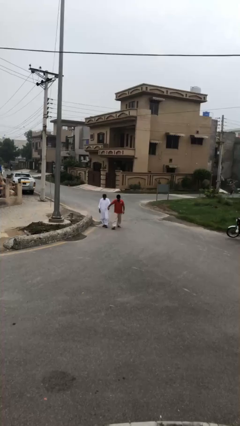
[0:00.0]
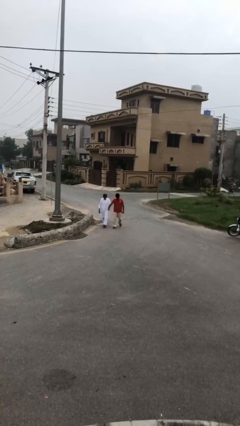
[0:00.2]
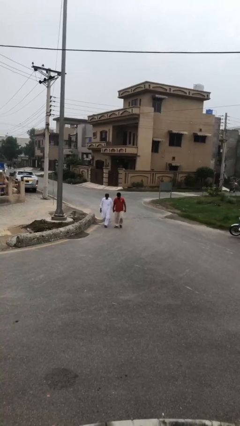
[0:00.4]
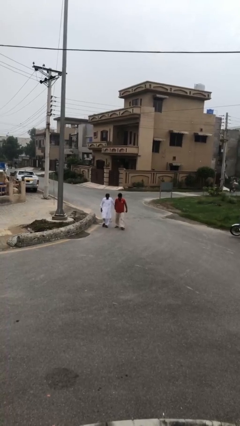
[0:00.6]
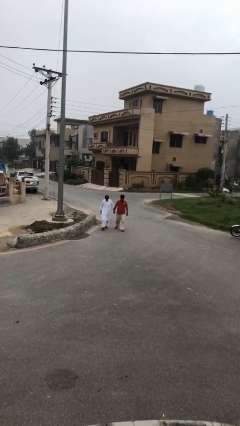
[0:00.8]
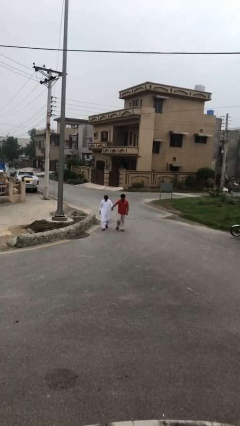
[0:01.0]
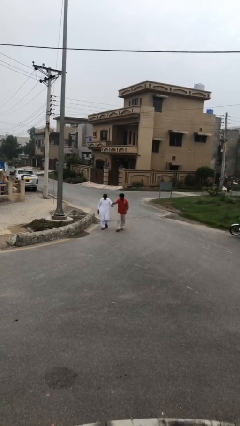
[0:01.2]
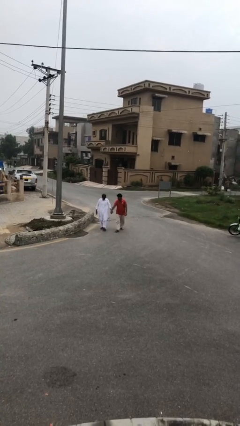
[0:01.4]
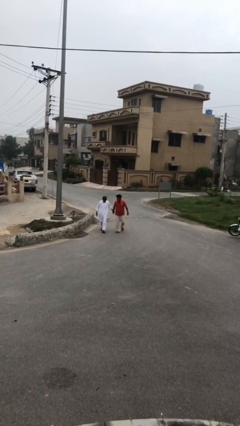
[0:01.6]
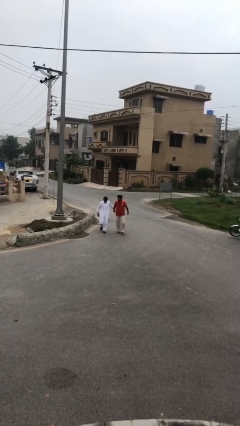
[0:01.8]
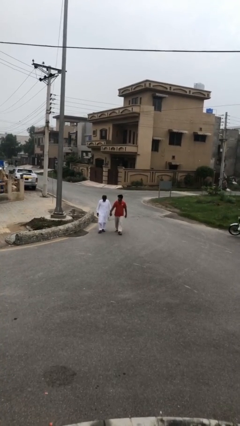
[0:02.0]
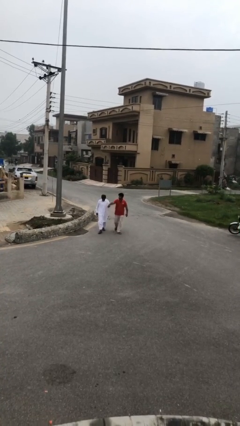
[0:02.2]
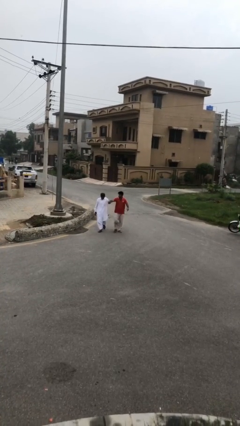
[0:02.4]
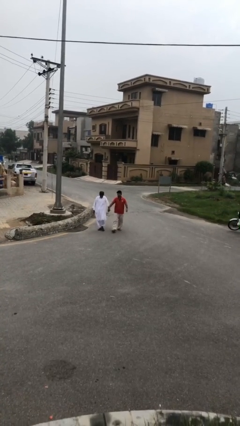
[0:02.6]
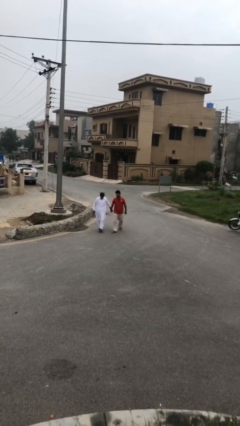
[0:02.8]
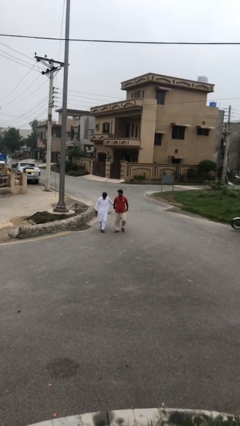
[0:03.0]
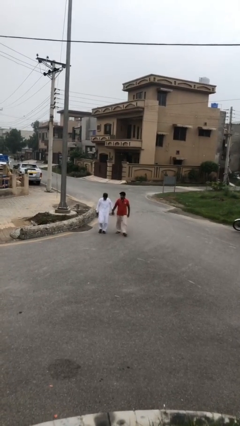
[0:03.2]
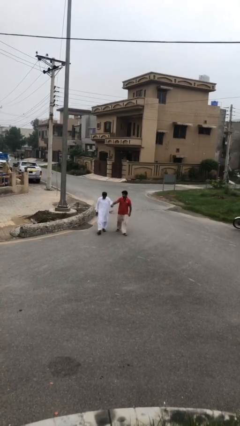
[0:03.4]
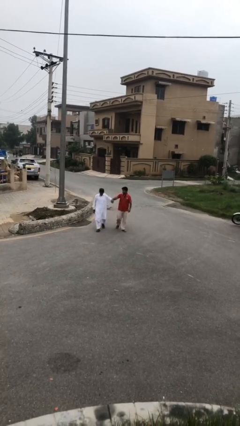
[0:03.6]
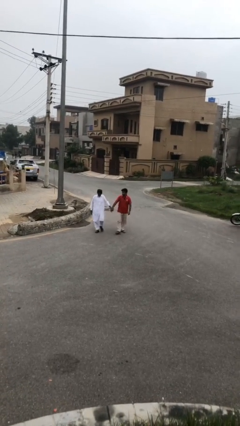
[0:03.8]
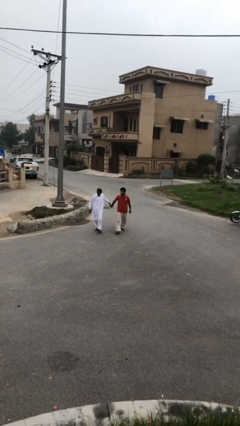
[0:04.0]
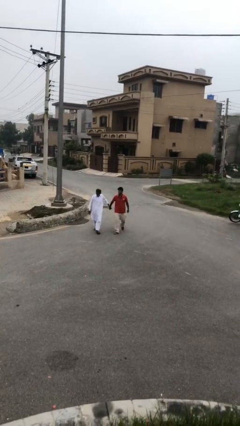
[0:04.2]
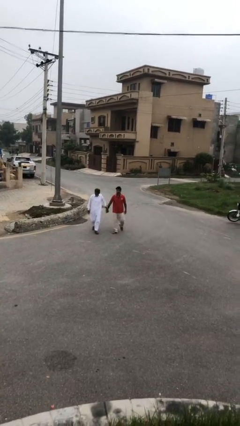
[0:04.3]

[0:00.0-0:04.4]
person holds hand

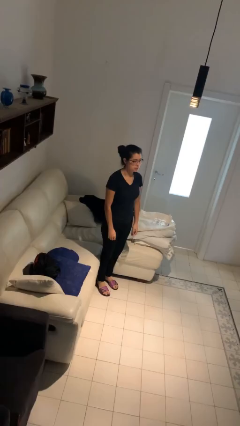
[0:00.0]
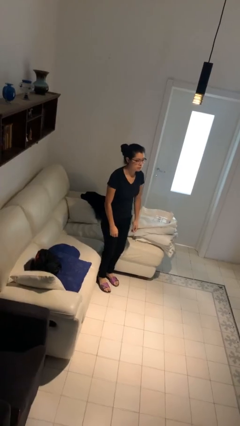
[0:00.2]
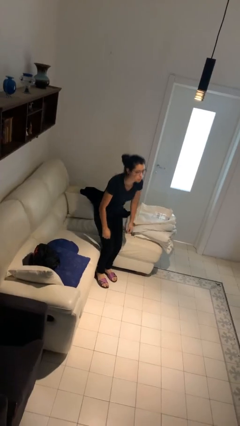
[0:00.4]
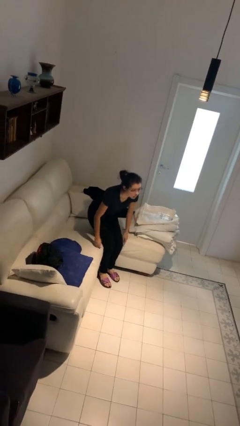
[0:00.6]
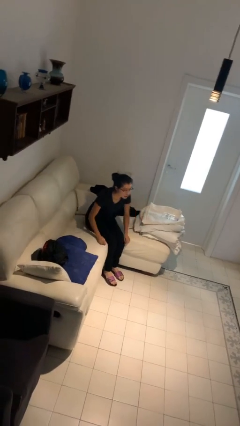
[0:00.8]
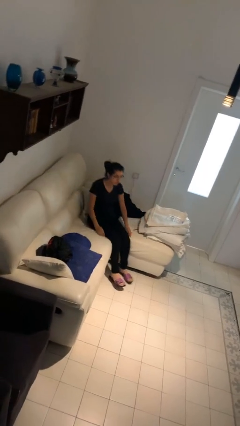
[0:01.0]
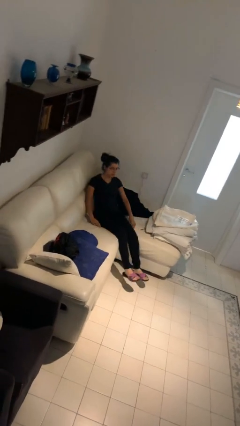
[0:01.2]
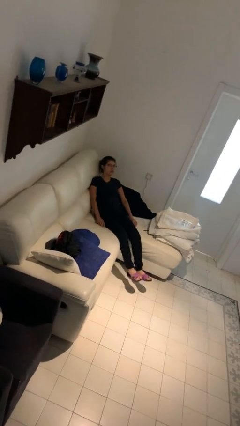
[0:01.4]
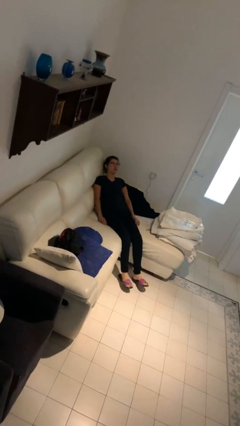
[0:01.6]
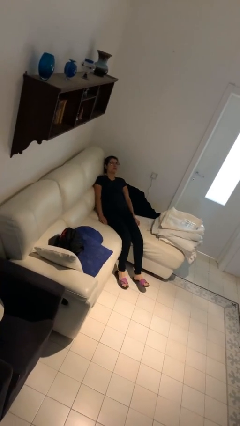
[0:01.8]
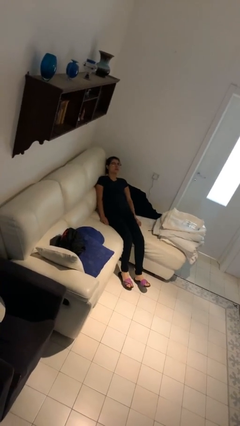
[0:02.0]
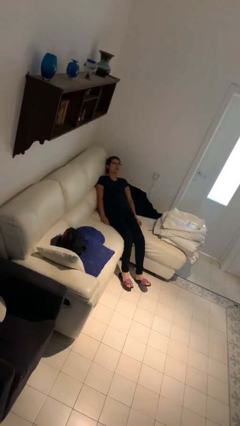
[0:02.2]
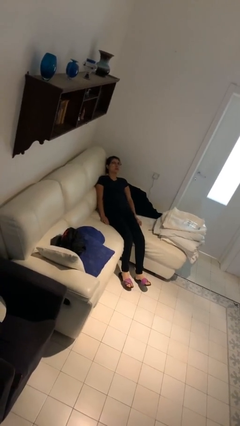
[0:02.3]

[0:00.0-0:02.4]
person lies down on couch

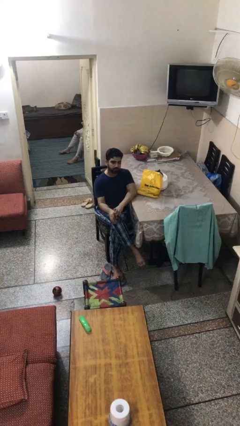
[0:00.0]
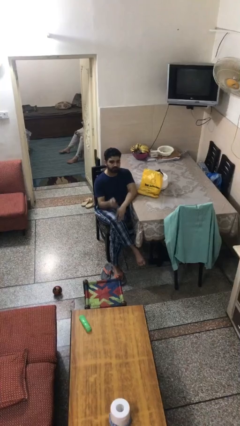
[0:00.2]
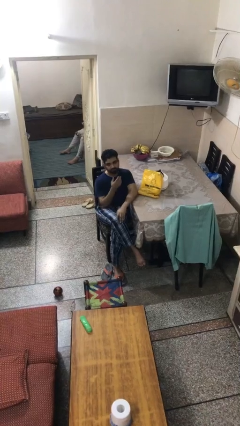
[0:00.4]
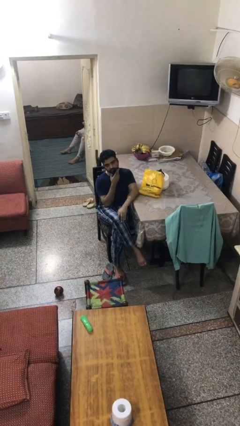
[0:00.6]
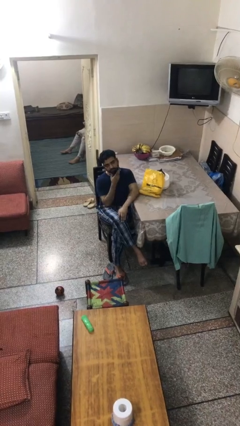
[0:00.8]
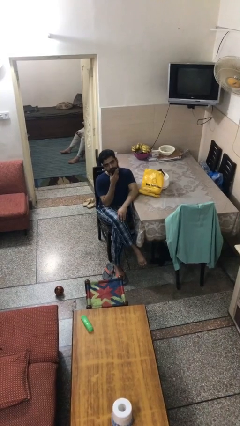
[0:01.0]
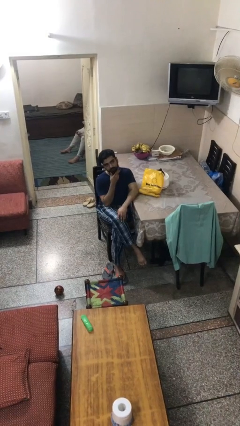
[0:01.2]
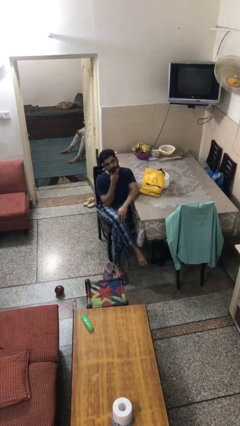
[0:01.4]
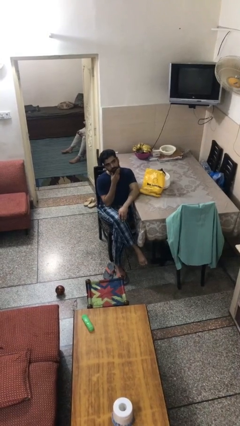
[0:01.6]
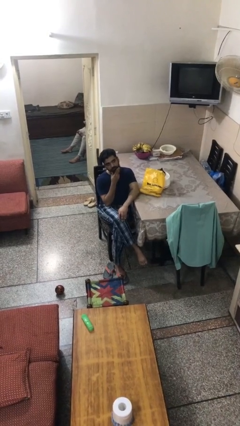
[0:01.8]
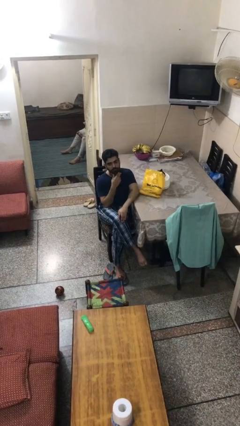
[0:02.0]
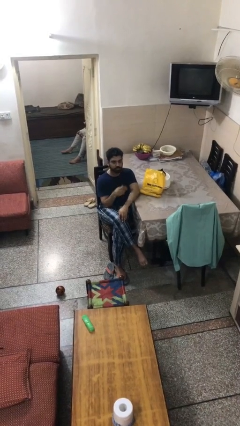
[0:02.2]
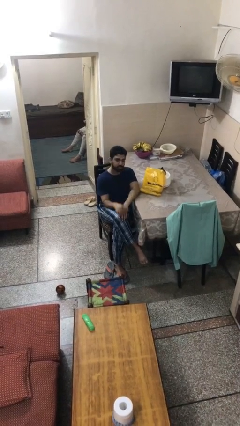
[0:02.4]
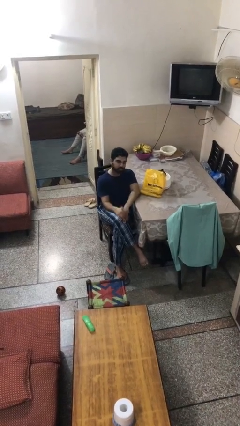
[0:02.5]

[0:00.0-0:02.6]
person strokes chin

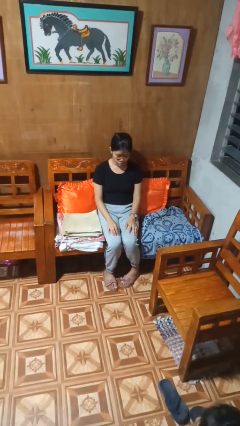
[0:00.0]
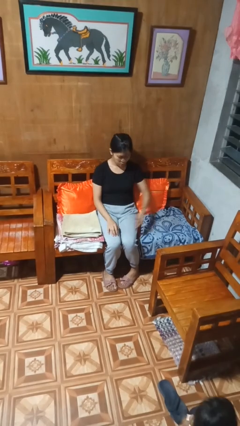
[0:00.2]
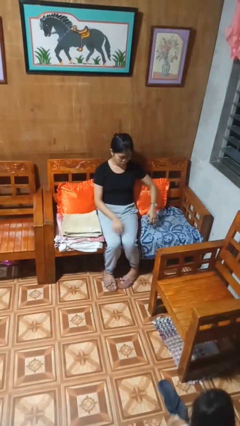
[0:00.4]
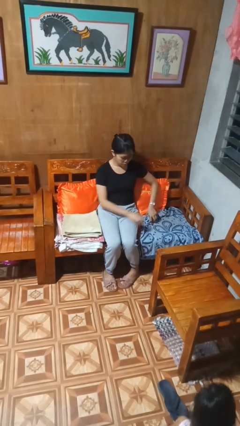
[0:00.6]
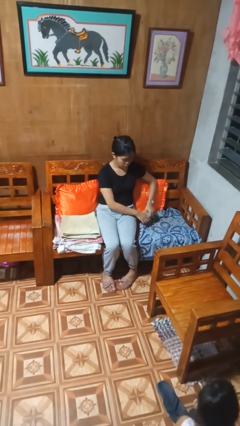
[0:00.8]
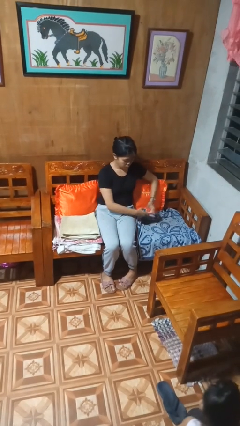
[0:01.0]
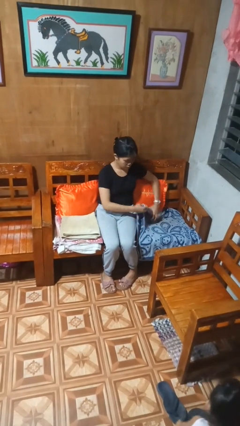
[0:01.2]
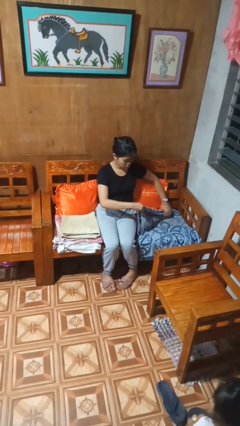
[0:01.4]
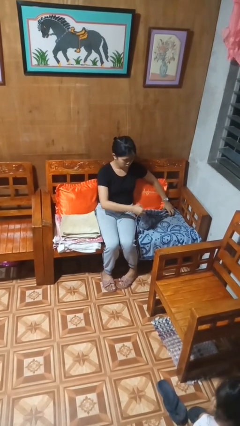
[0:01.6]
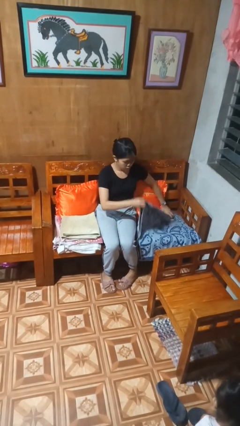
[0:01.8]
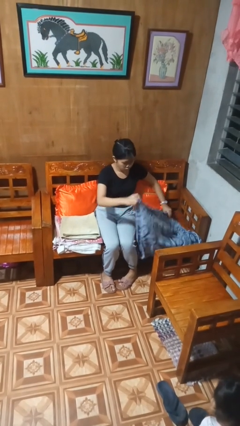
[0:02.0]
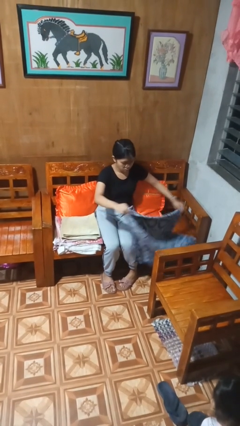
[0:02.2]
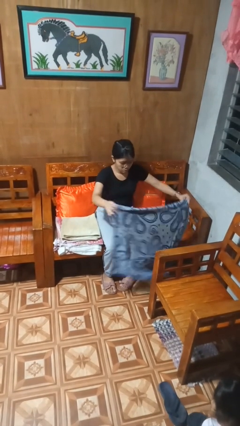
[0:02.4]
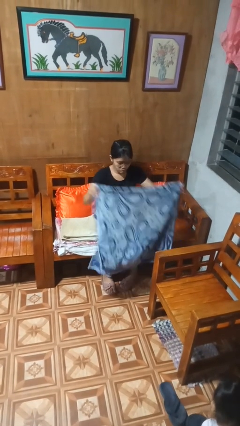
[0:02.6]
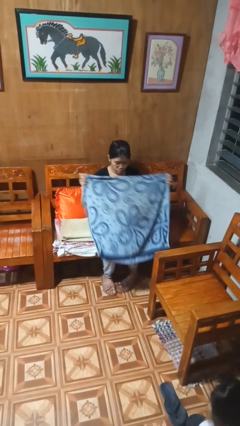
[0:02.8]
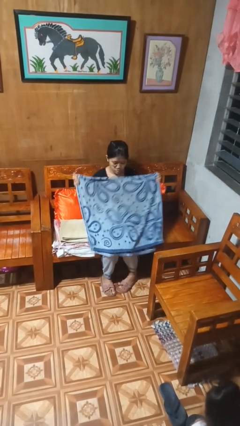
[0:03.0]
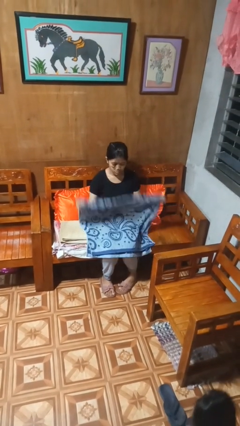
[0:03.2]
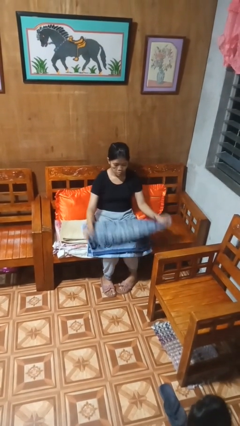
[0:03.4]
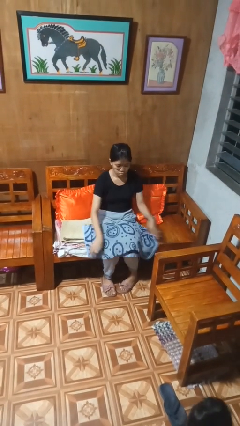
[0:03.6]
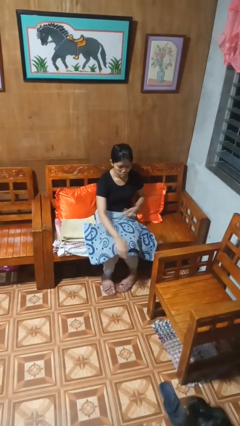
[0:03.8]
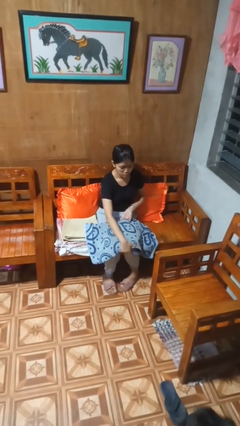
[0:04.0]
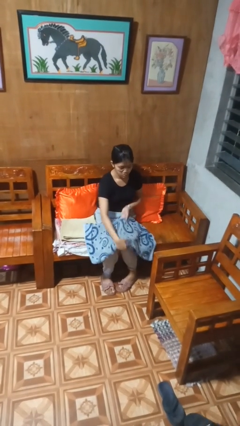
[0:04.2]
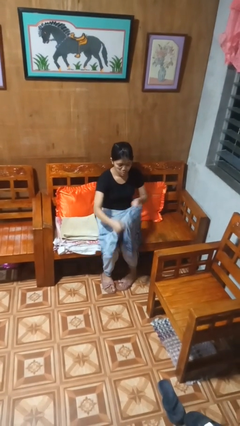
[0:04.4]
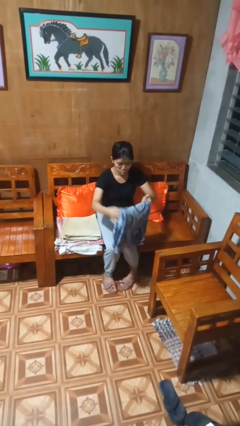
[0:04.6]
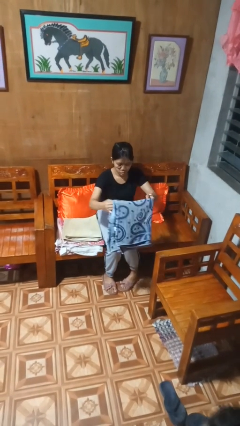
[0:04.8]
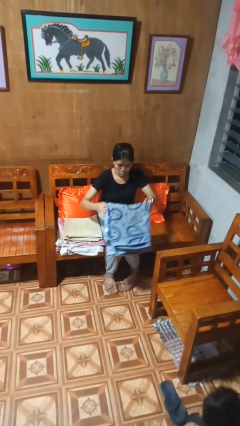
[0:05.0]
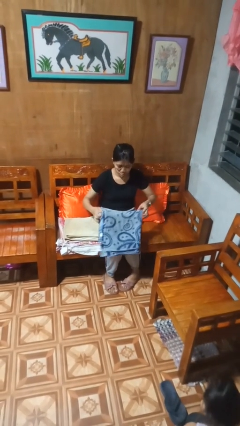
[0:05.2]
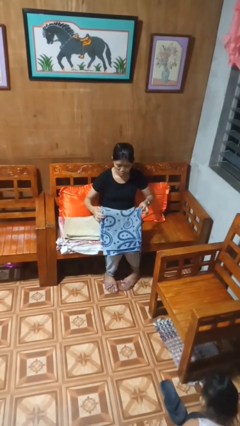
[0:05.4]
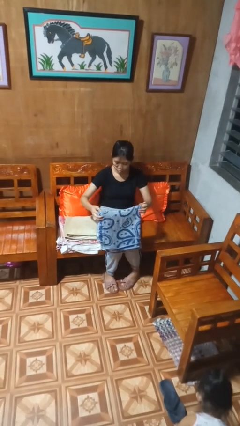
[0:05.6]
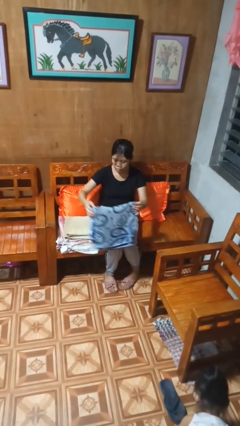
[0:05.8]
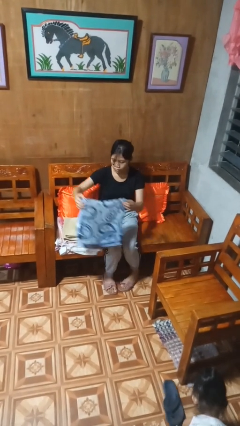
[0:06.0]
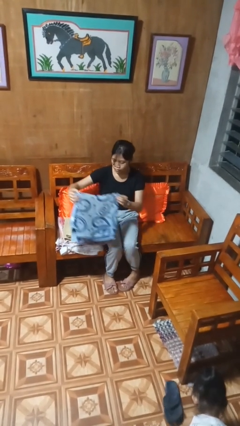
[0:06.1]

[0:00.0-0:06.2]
person folds towel

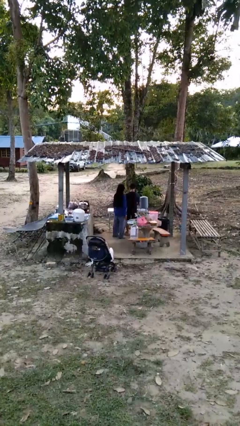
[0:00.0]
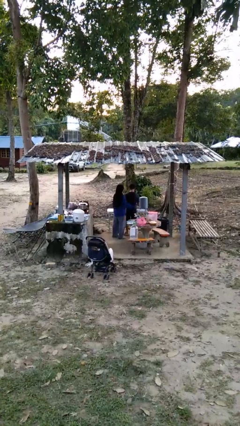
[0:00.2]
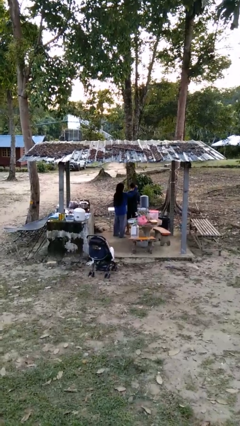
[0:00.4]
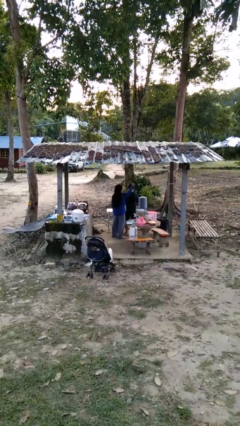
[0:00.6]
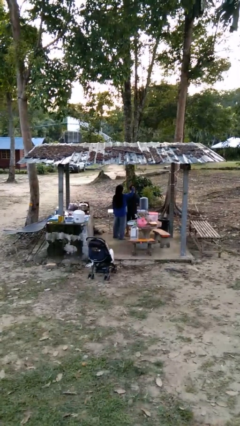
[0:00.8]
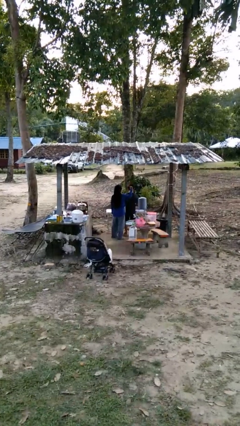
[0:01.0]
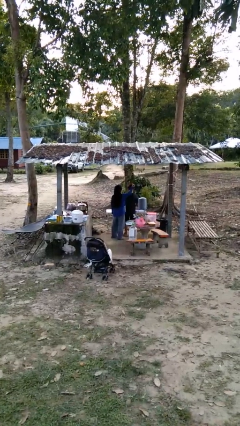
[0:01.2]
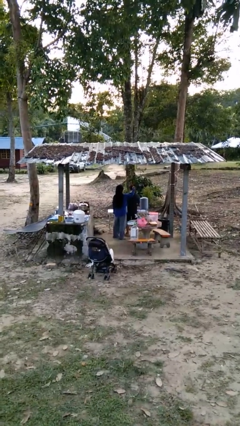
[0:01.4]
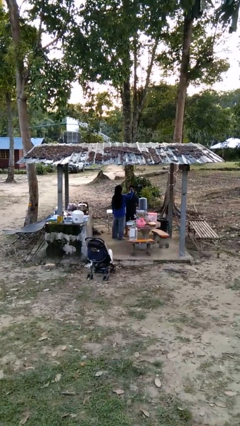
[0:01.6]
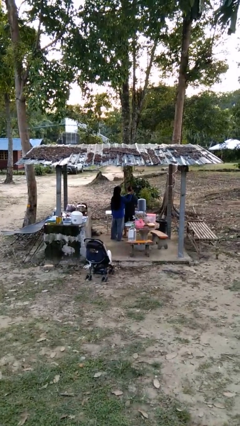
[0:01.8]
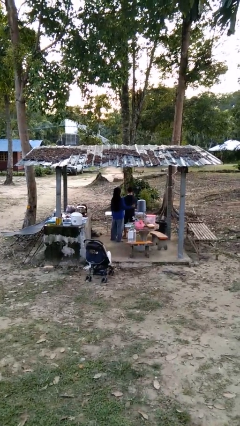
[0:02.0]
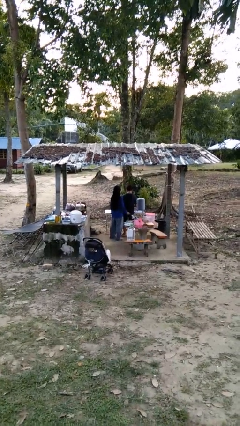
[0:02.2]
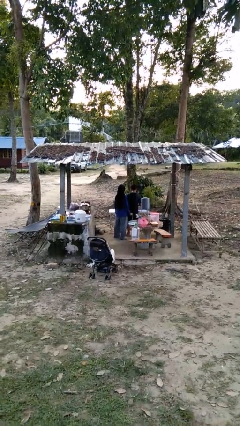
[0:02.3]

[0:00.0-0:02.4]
person brushes hair of person

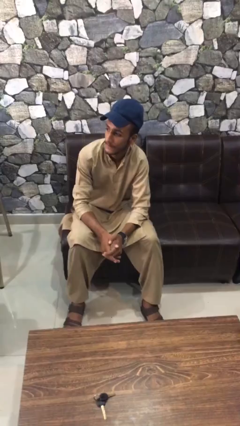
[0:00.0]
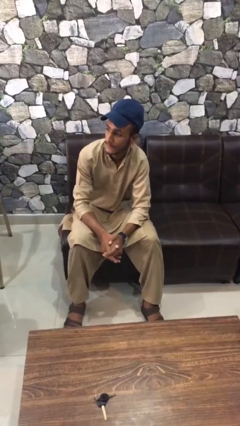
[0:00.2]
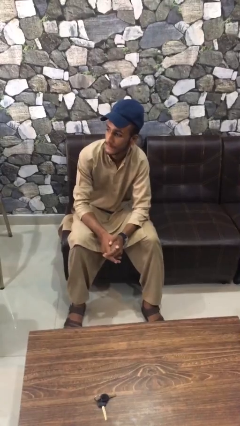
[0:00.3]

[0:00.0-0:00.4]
person sticks out tongue
